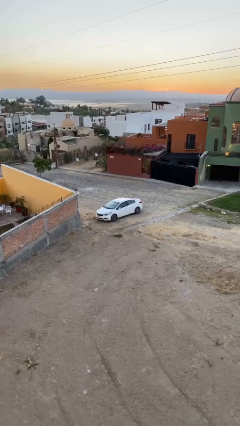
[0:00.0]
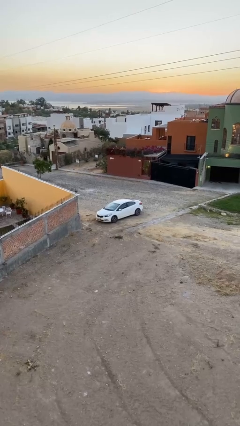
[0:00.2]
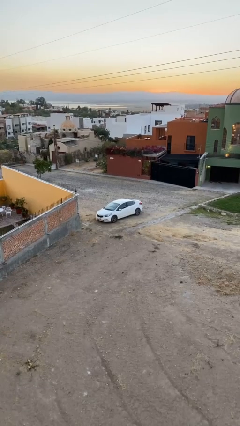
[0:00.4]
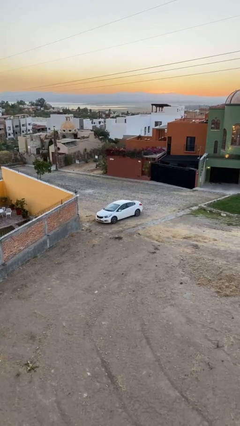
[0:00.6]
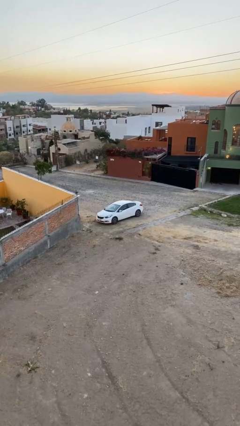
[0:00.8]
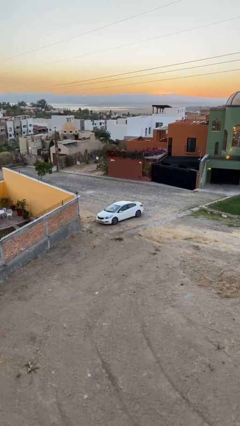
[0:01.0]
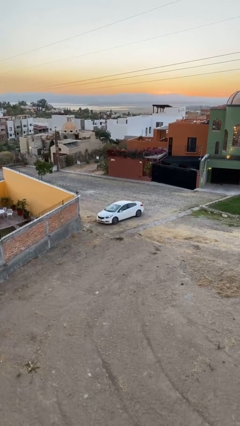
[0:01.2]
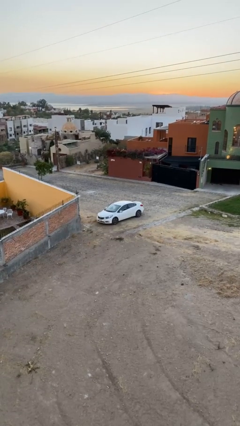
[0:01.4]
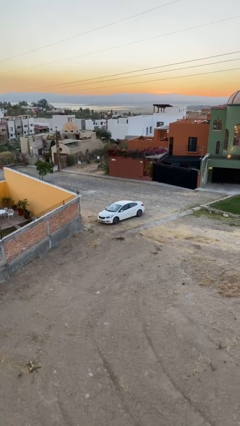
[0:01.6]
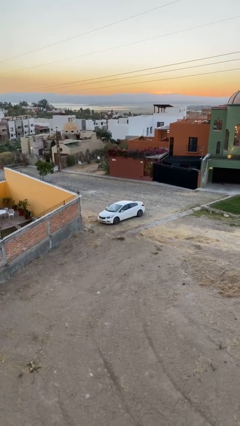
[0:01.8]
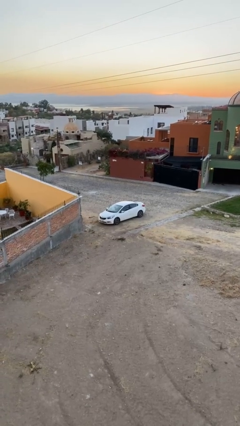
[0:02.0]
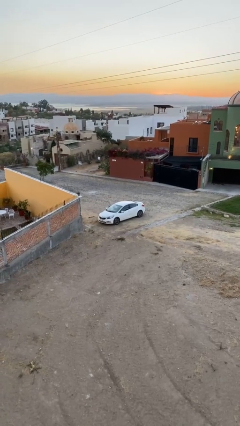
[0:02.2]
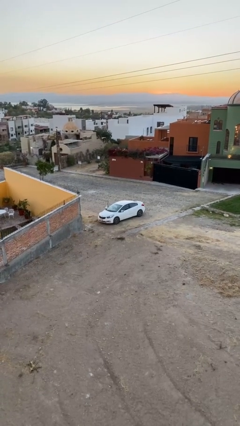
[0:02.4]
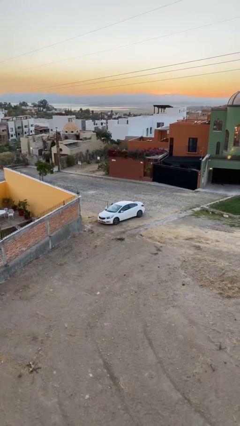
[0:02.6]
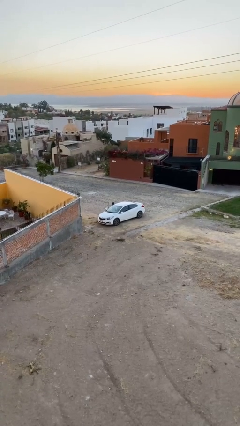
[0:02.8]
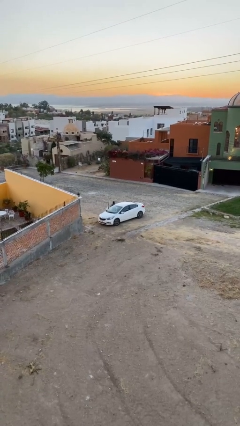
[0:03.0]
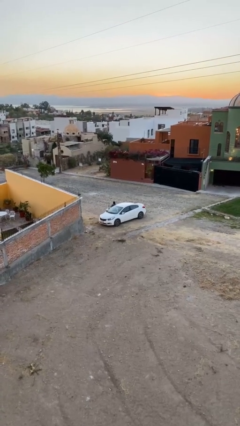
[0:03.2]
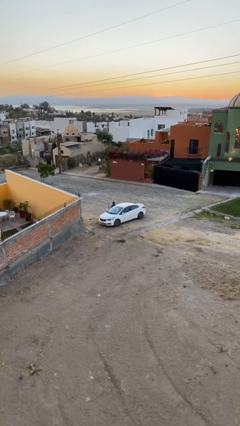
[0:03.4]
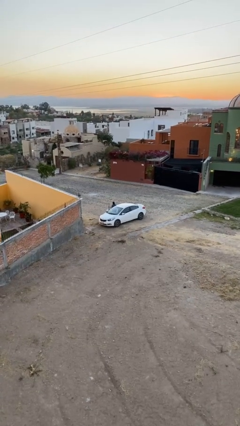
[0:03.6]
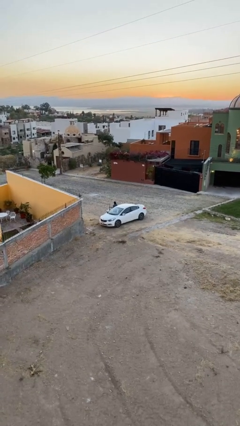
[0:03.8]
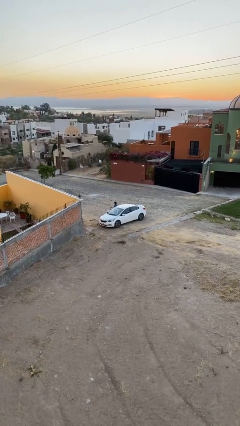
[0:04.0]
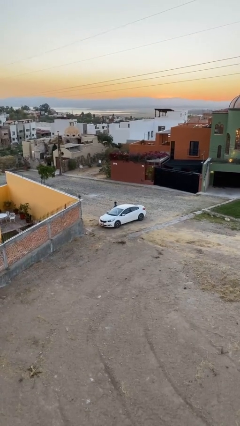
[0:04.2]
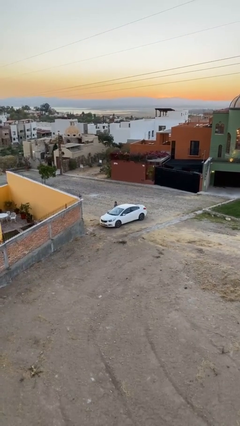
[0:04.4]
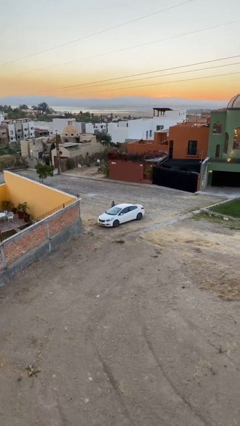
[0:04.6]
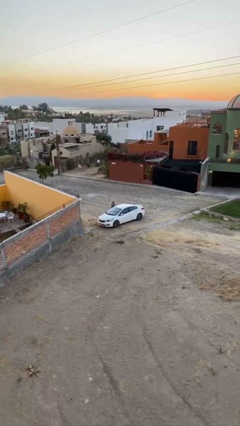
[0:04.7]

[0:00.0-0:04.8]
car drops off person

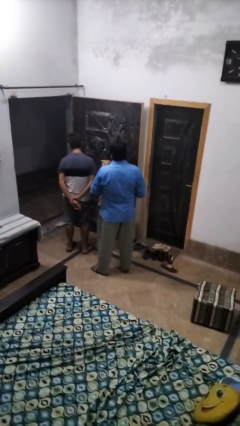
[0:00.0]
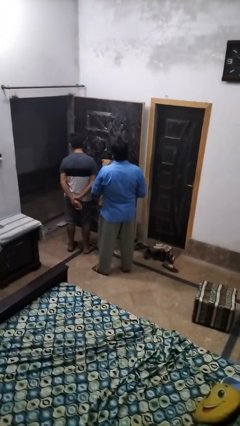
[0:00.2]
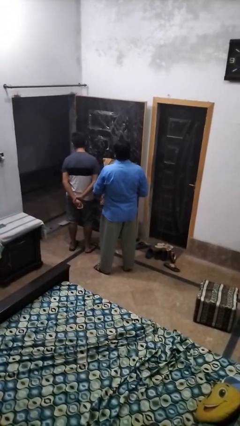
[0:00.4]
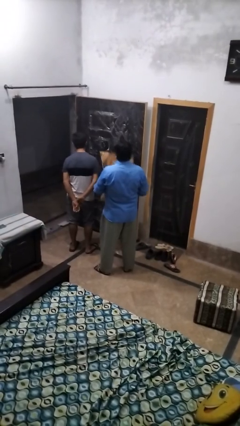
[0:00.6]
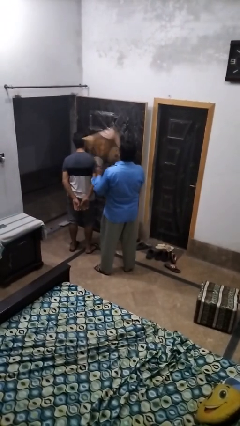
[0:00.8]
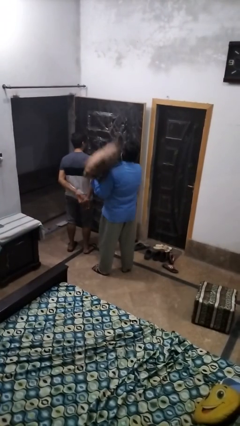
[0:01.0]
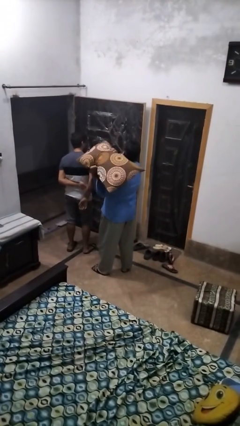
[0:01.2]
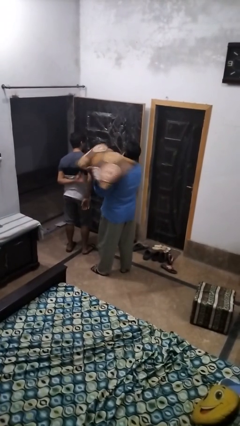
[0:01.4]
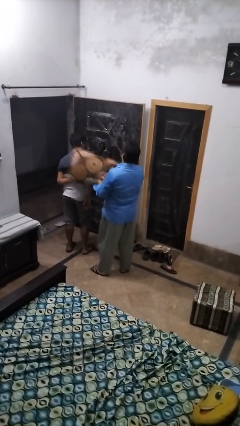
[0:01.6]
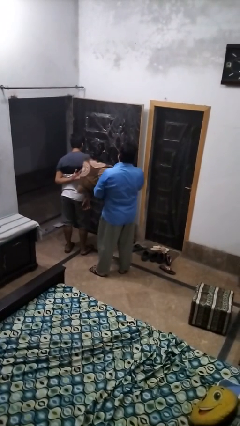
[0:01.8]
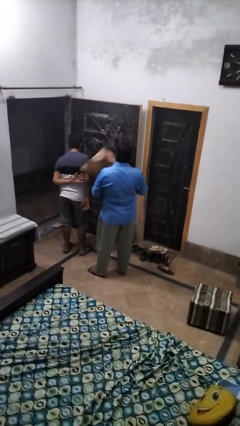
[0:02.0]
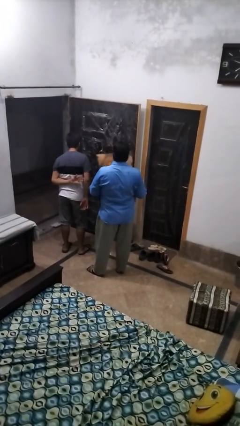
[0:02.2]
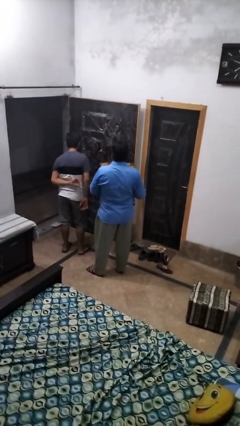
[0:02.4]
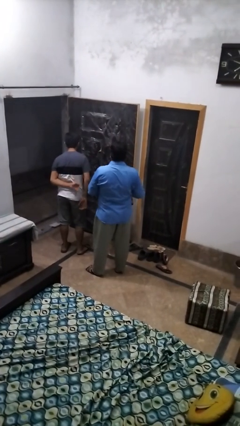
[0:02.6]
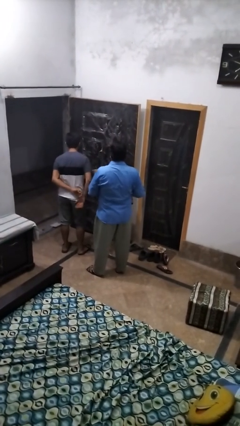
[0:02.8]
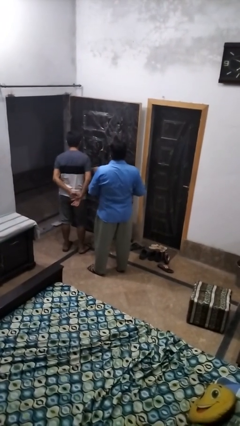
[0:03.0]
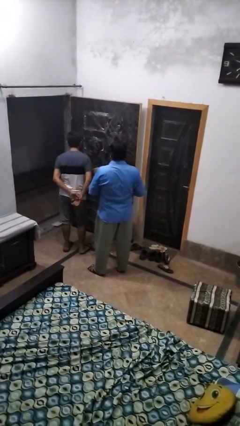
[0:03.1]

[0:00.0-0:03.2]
person hits person with pillow

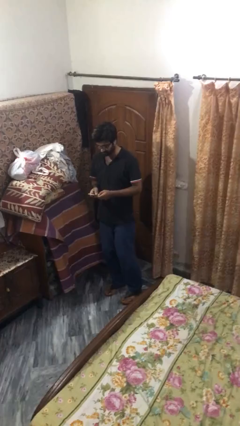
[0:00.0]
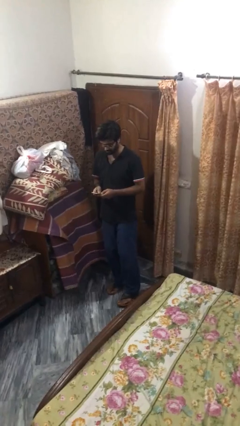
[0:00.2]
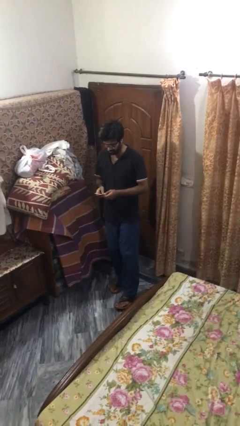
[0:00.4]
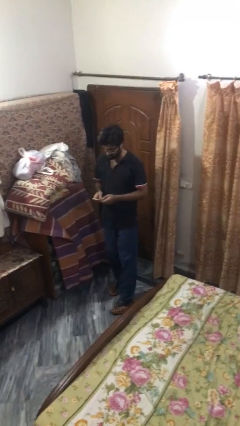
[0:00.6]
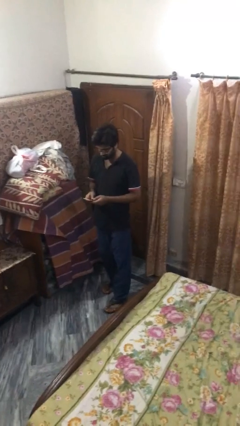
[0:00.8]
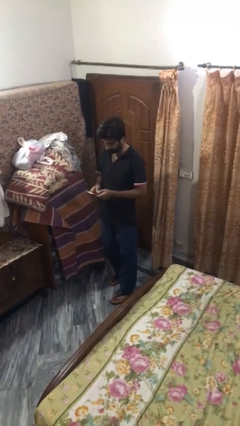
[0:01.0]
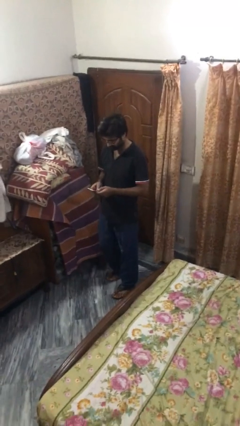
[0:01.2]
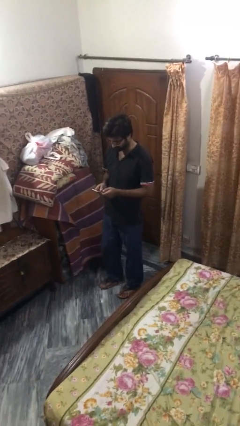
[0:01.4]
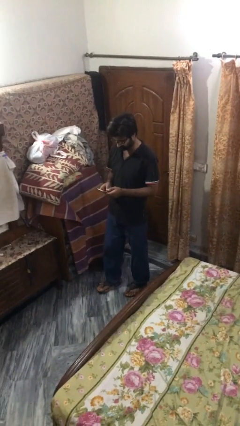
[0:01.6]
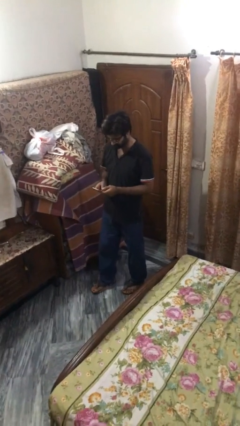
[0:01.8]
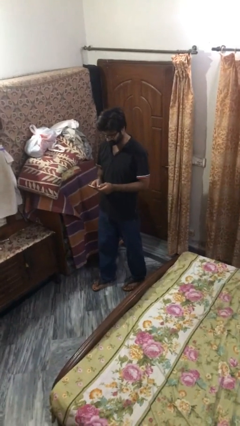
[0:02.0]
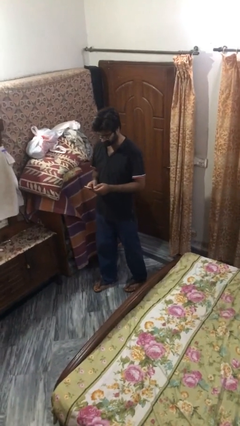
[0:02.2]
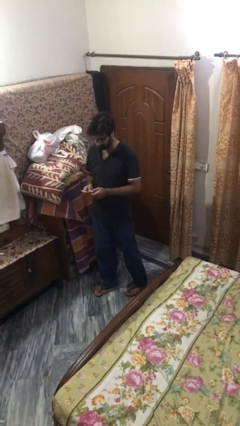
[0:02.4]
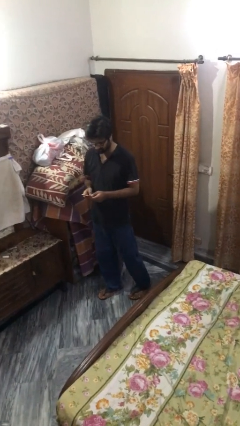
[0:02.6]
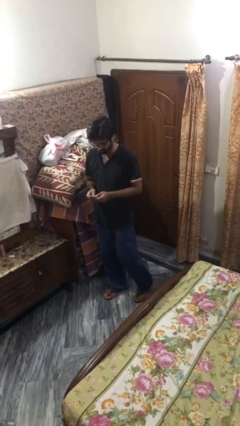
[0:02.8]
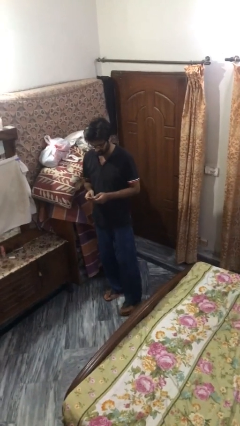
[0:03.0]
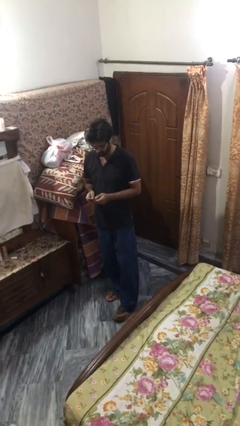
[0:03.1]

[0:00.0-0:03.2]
person texts on phone

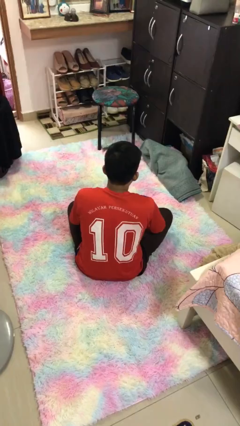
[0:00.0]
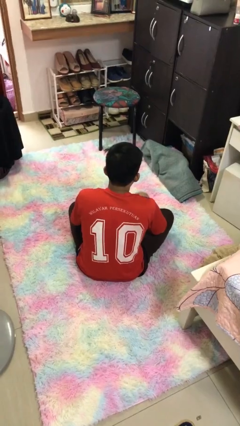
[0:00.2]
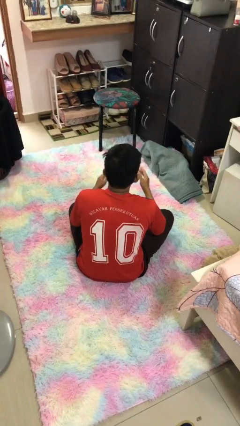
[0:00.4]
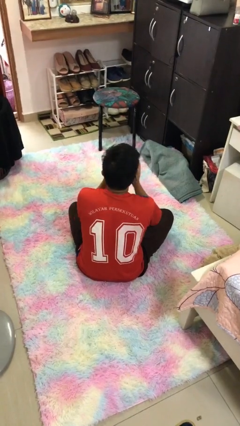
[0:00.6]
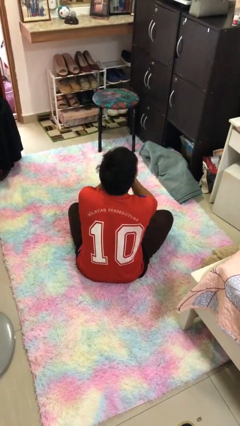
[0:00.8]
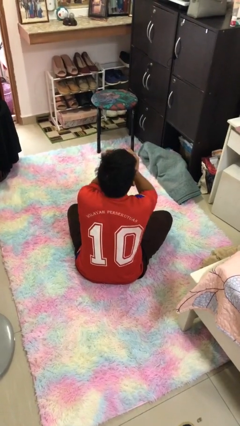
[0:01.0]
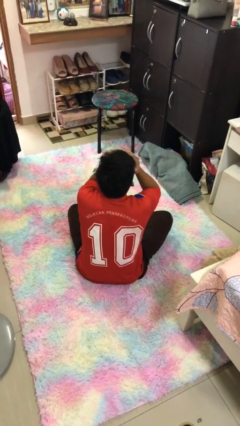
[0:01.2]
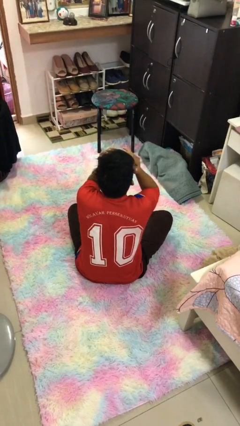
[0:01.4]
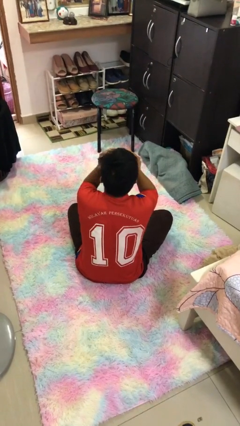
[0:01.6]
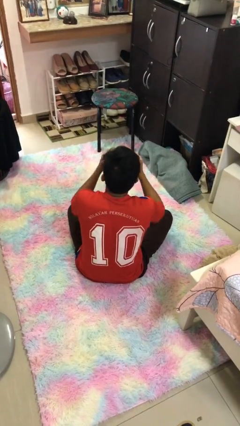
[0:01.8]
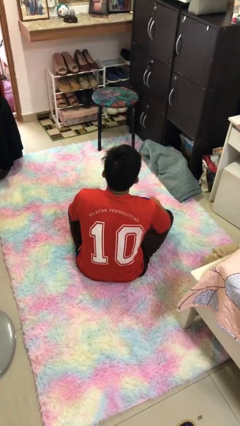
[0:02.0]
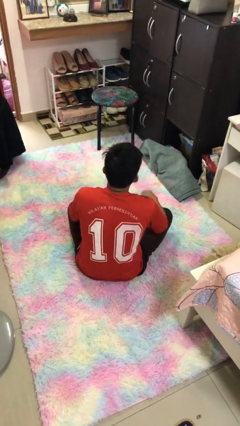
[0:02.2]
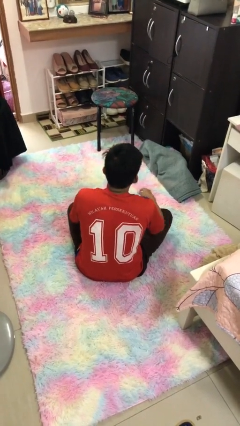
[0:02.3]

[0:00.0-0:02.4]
person covers face with hands

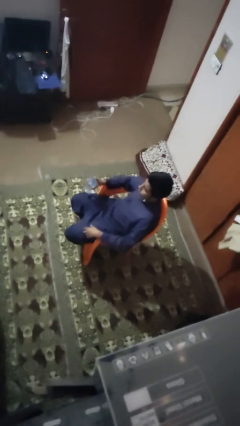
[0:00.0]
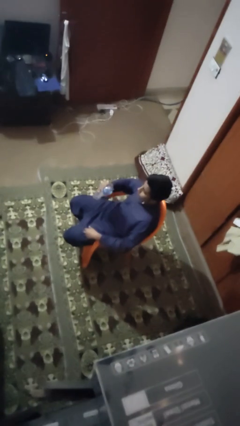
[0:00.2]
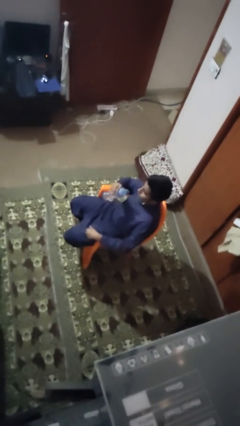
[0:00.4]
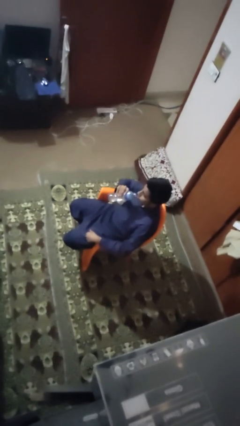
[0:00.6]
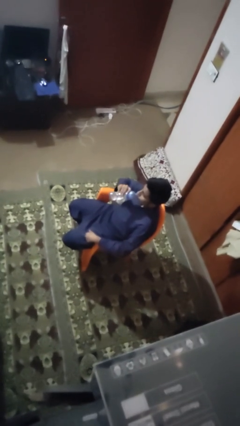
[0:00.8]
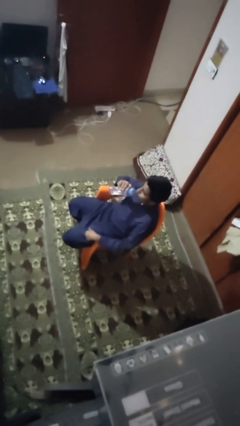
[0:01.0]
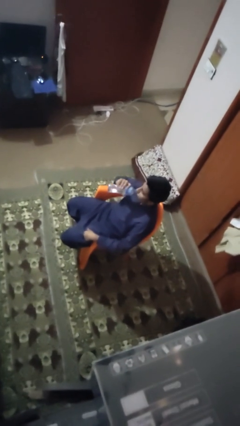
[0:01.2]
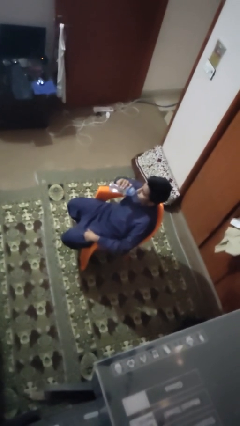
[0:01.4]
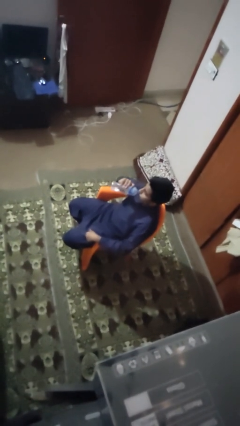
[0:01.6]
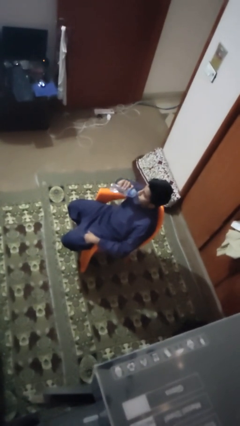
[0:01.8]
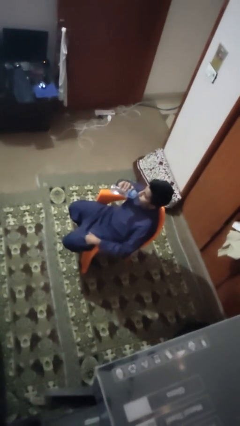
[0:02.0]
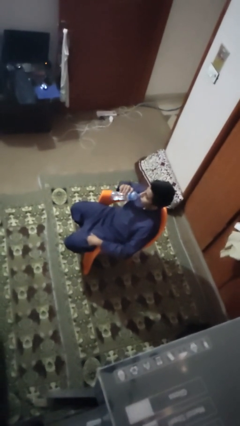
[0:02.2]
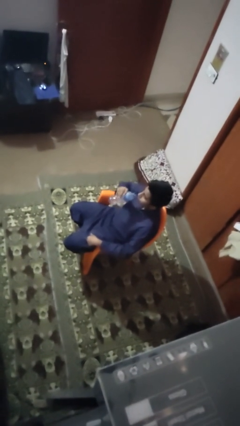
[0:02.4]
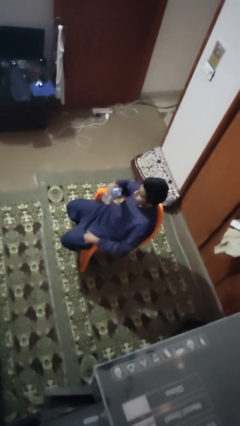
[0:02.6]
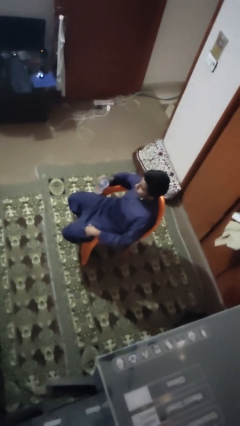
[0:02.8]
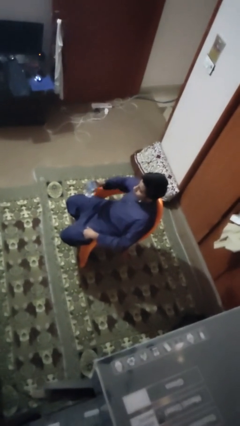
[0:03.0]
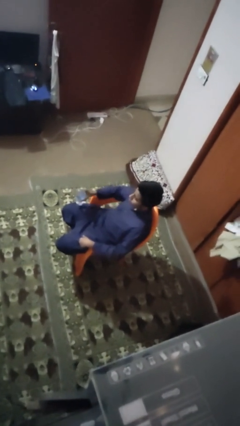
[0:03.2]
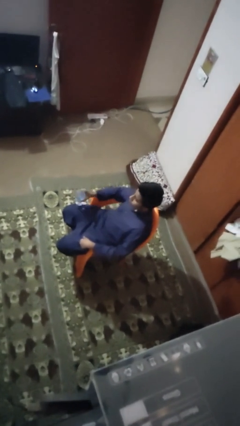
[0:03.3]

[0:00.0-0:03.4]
person drinks from bottle

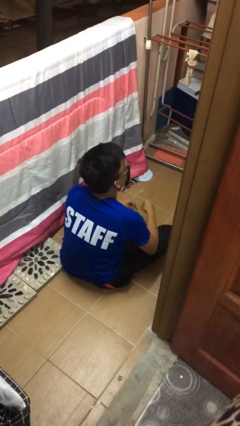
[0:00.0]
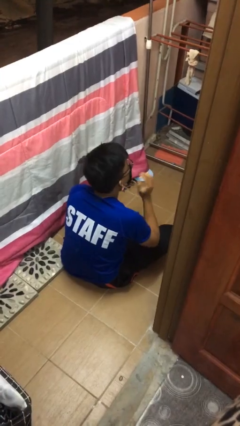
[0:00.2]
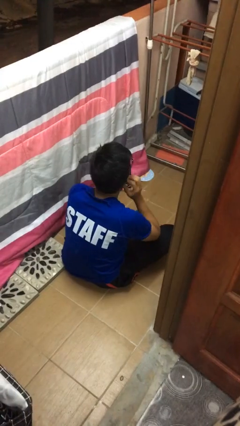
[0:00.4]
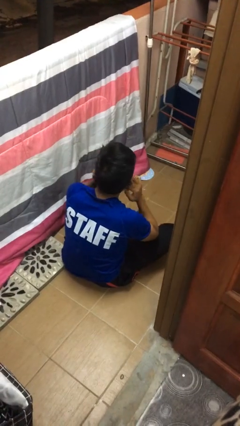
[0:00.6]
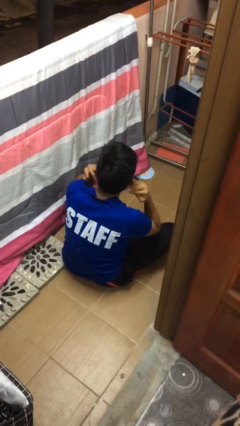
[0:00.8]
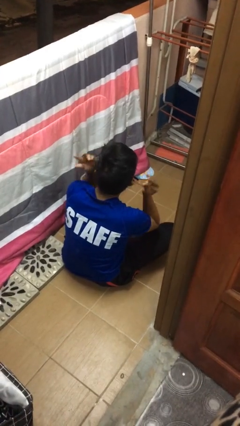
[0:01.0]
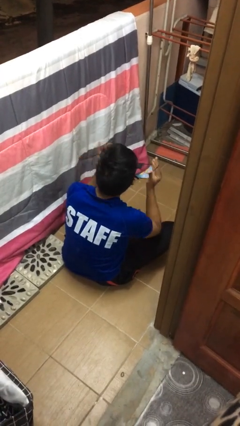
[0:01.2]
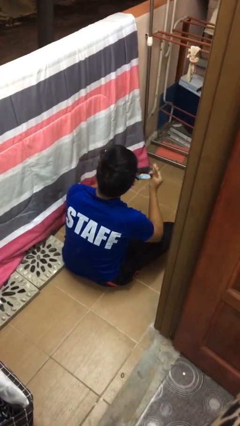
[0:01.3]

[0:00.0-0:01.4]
person takes off facemask
